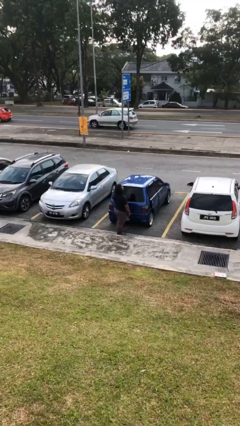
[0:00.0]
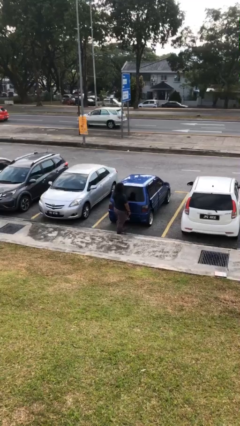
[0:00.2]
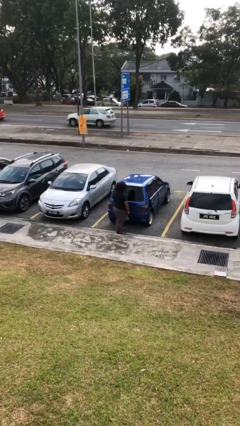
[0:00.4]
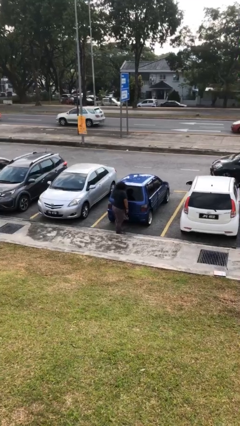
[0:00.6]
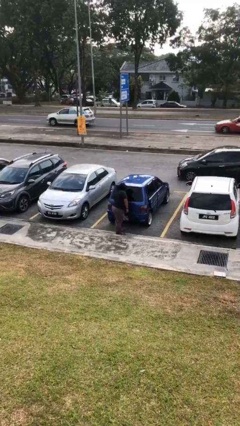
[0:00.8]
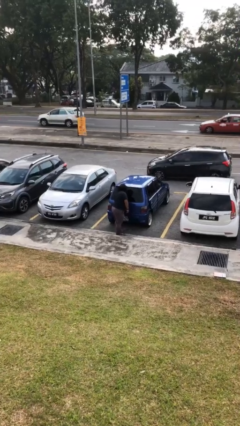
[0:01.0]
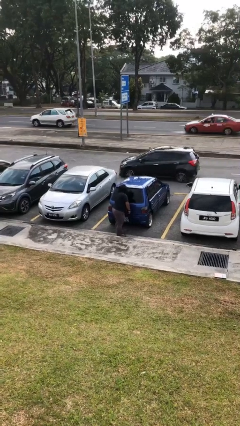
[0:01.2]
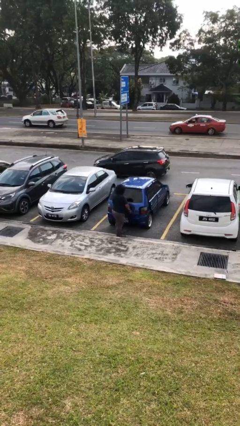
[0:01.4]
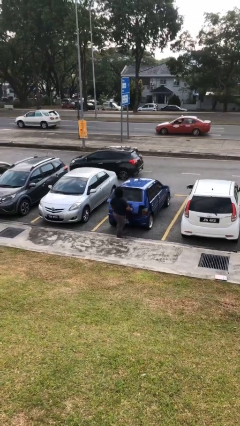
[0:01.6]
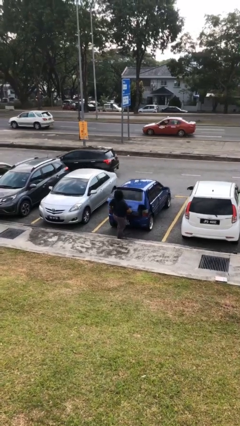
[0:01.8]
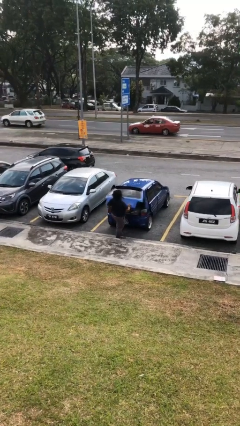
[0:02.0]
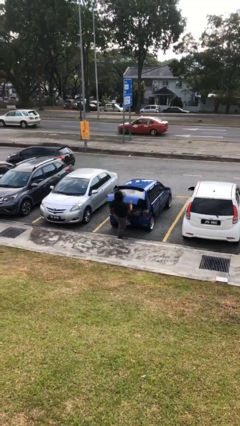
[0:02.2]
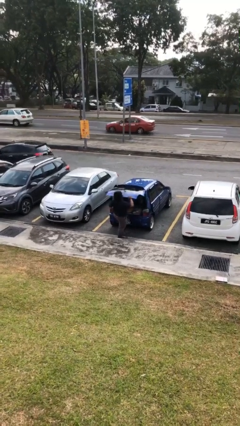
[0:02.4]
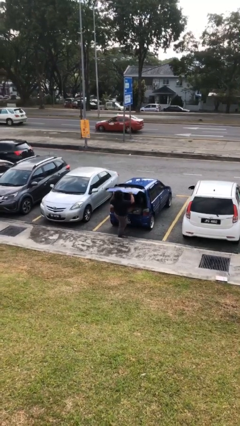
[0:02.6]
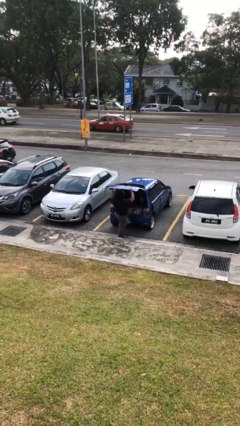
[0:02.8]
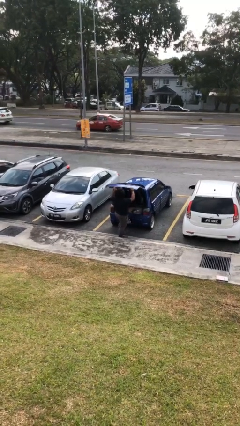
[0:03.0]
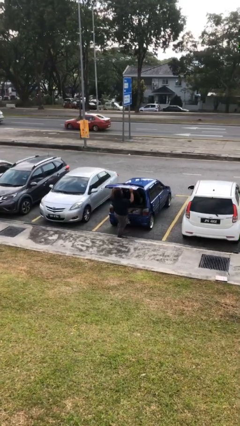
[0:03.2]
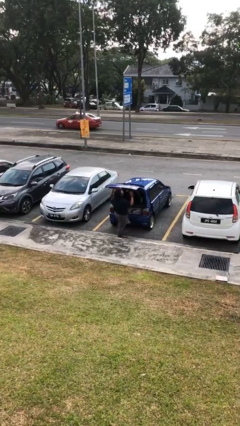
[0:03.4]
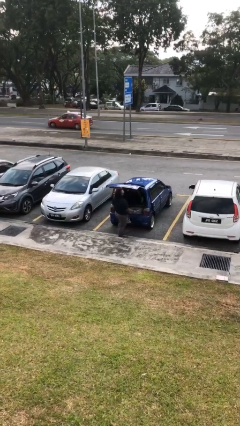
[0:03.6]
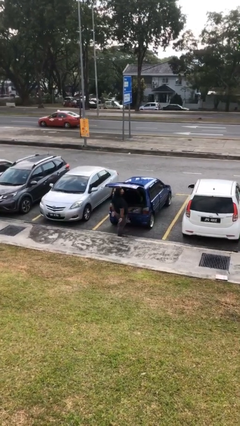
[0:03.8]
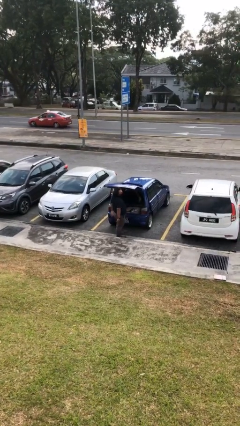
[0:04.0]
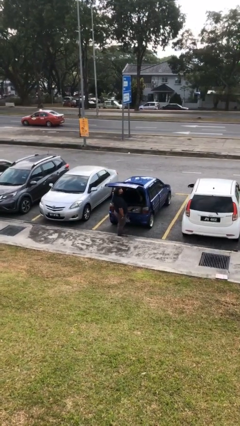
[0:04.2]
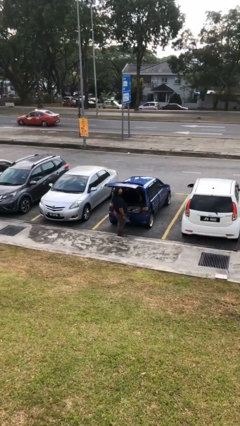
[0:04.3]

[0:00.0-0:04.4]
person opens car trunk

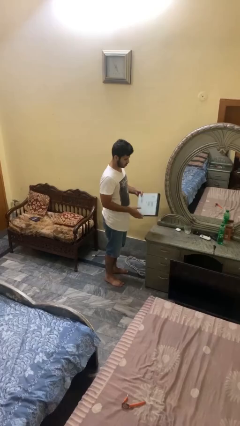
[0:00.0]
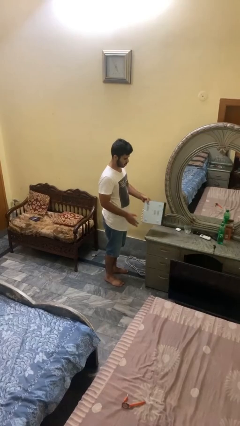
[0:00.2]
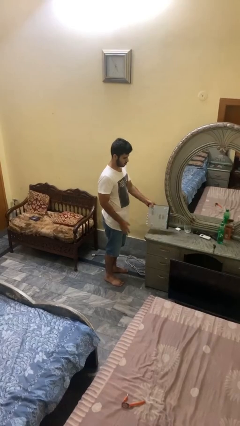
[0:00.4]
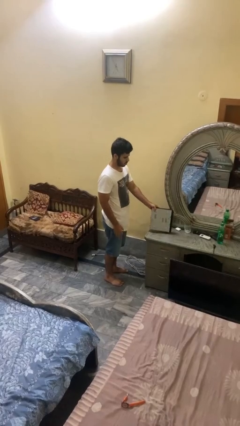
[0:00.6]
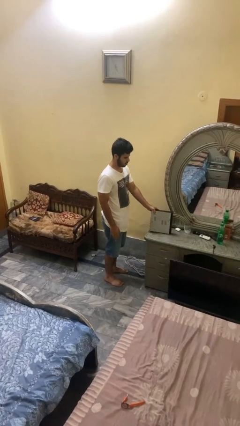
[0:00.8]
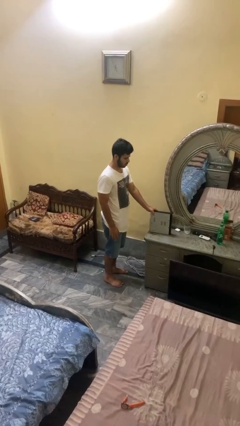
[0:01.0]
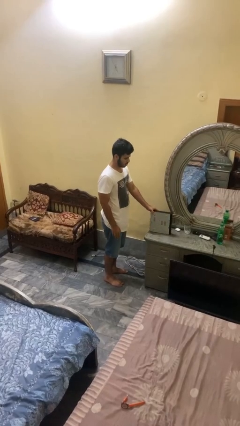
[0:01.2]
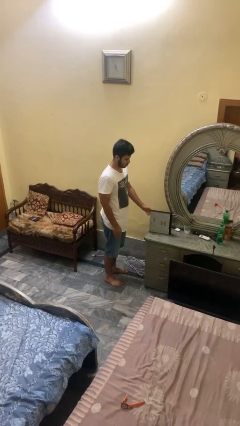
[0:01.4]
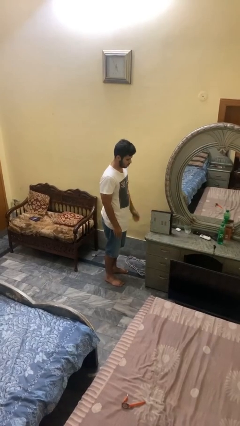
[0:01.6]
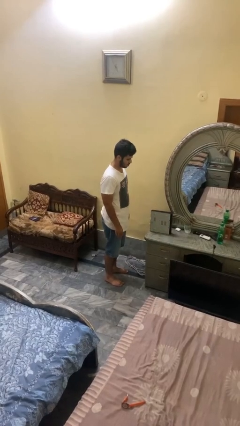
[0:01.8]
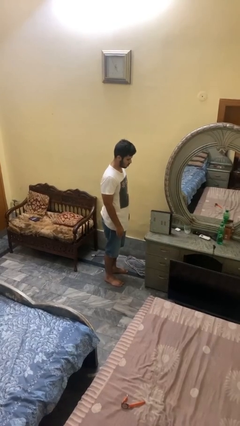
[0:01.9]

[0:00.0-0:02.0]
person puts down object on countertop

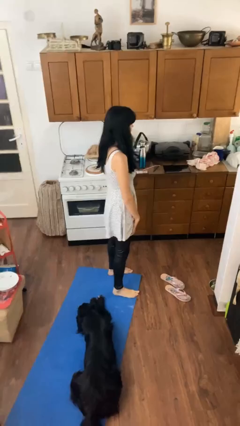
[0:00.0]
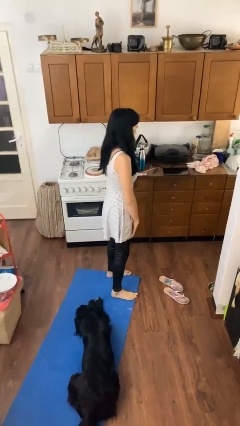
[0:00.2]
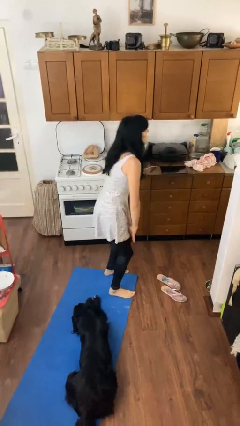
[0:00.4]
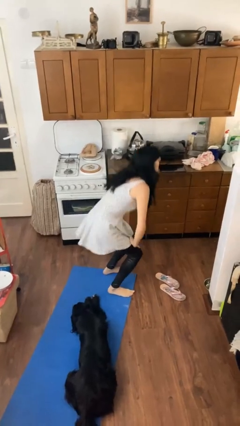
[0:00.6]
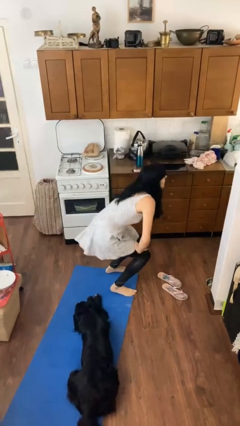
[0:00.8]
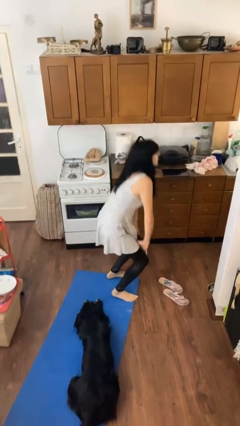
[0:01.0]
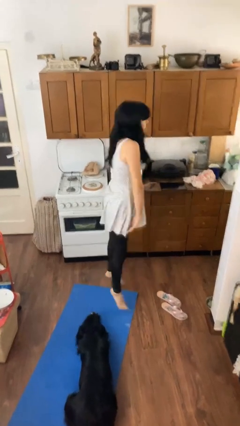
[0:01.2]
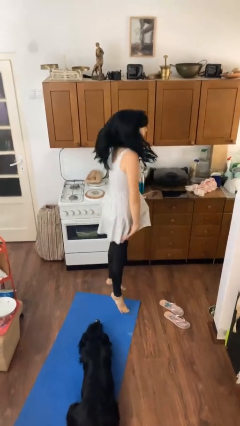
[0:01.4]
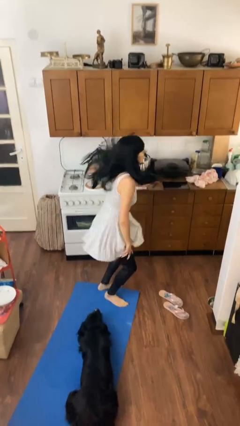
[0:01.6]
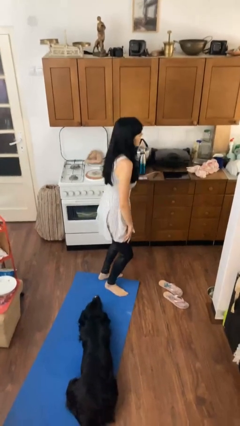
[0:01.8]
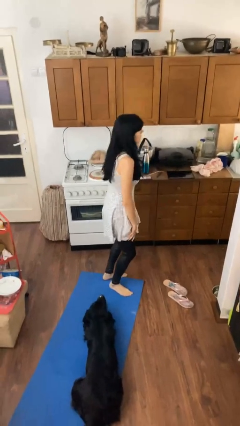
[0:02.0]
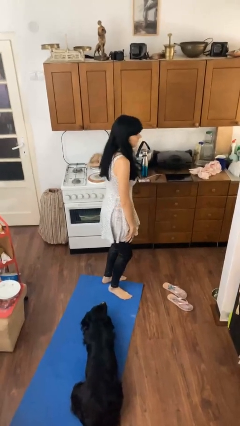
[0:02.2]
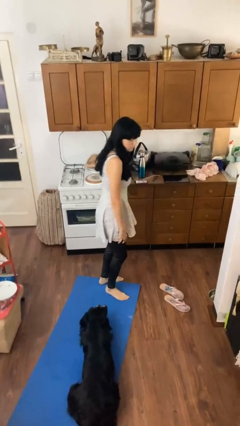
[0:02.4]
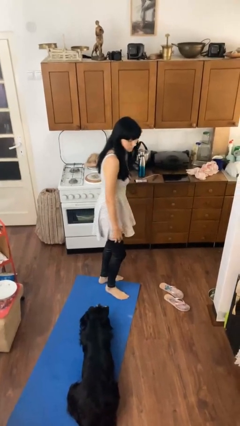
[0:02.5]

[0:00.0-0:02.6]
person jumps

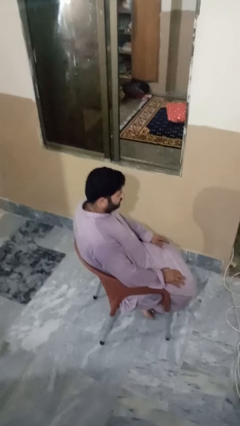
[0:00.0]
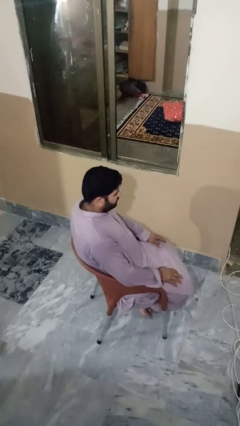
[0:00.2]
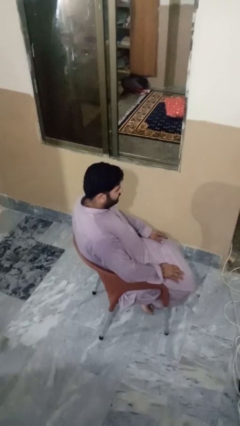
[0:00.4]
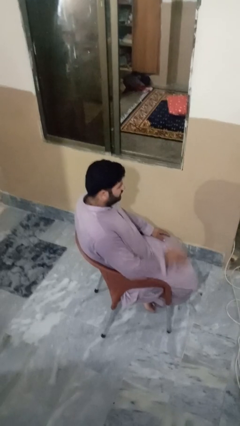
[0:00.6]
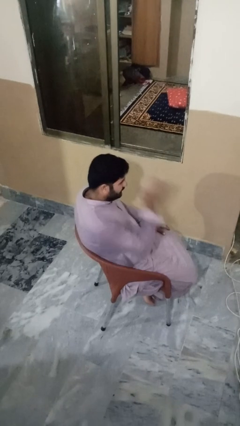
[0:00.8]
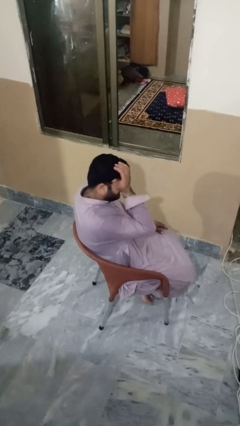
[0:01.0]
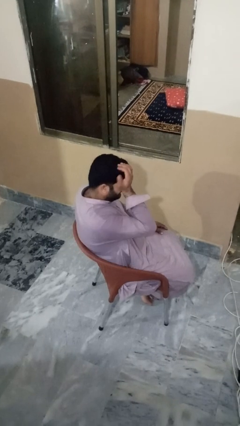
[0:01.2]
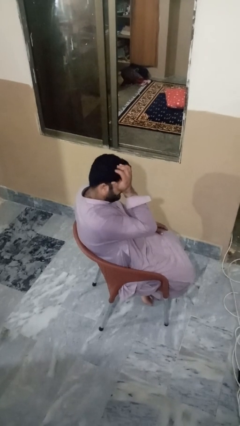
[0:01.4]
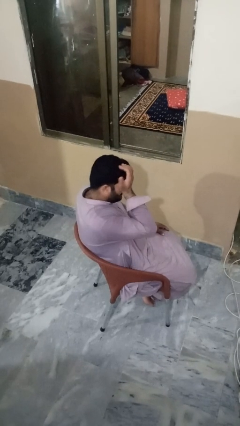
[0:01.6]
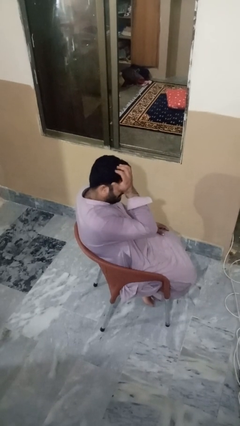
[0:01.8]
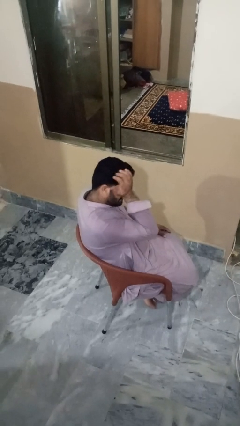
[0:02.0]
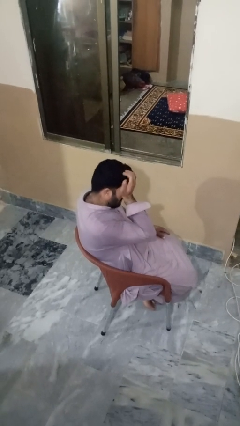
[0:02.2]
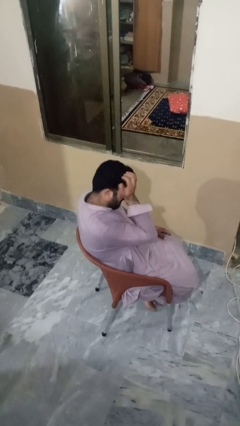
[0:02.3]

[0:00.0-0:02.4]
person rubs eyes

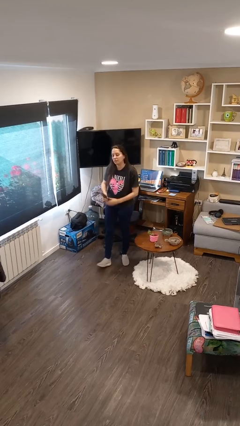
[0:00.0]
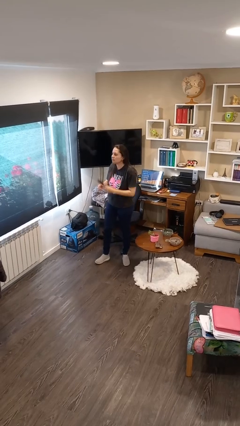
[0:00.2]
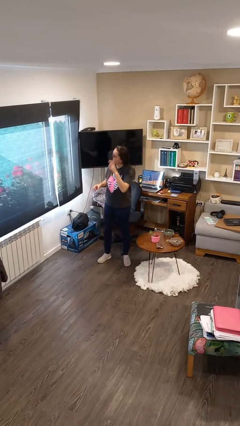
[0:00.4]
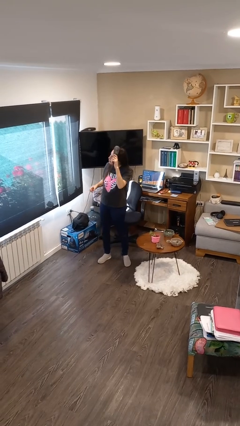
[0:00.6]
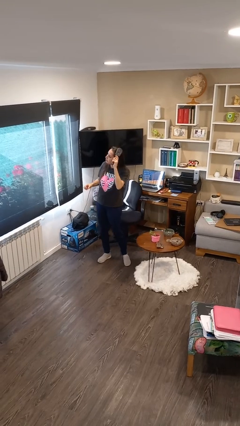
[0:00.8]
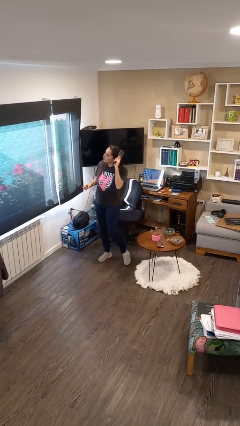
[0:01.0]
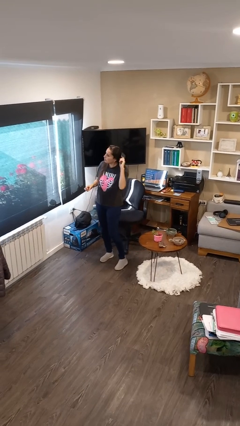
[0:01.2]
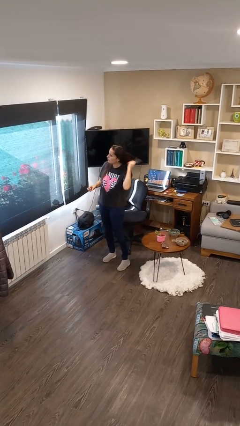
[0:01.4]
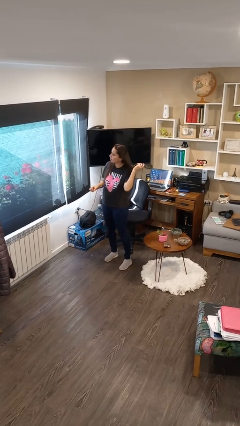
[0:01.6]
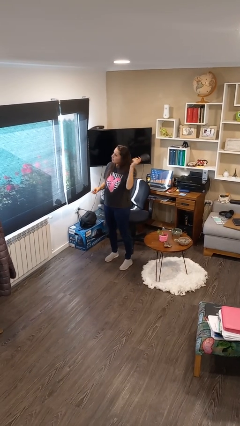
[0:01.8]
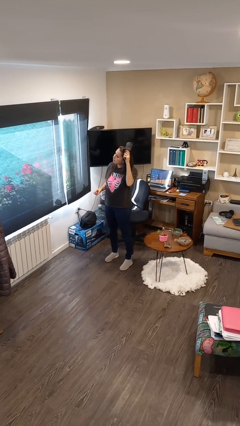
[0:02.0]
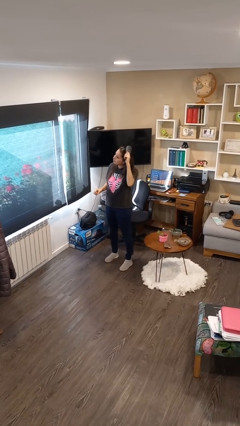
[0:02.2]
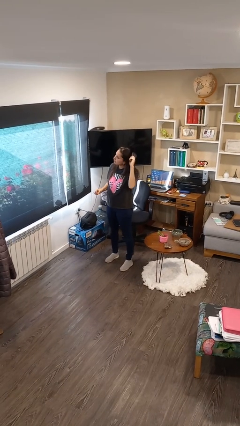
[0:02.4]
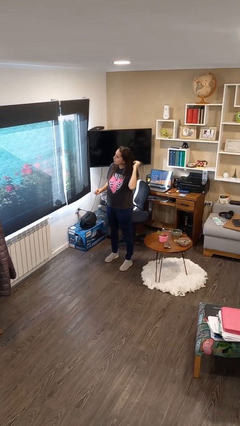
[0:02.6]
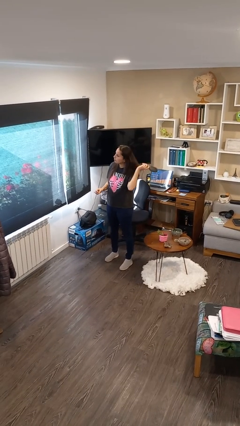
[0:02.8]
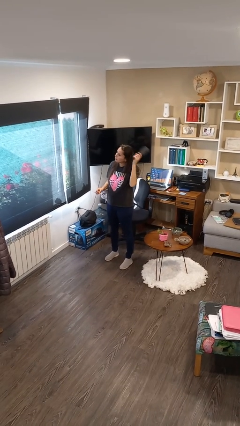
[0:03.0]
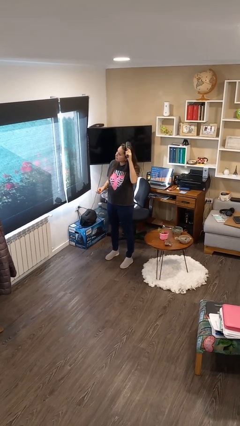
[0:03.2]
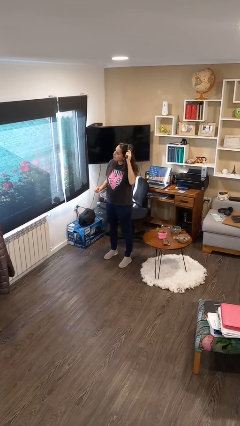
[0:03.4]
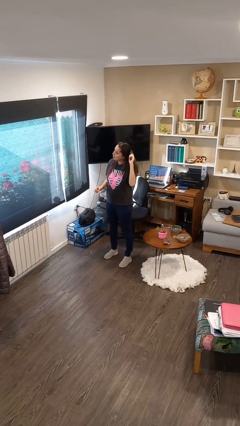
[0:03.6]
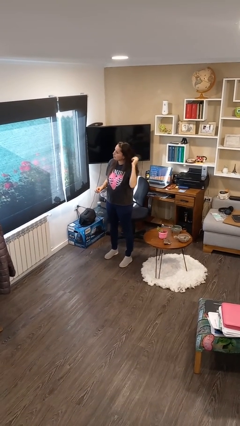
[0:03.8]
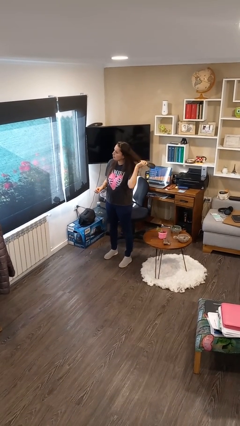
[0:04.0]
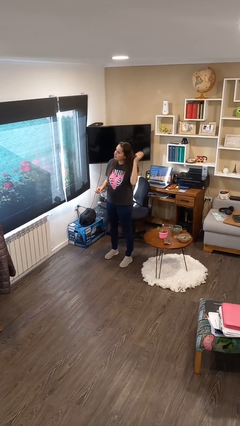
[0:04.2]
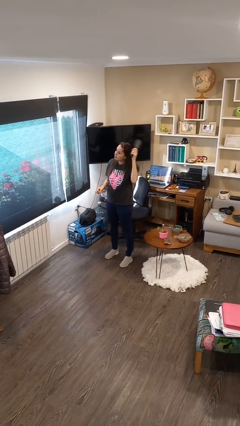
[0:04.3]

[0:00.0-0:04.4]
person brushes hair

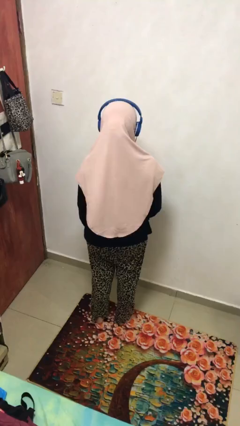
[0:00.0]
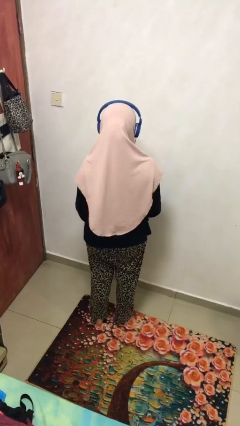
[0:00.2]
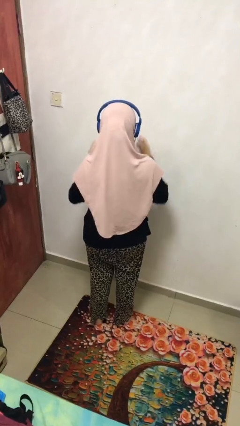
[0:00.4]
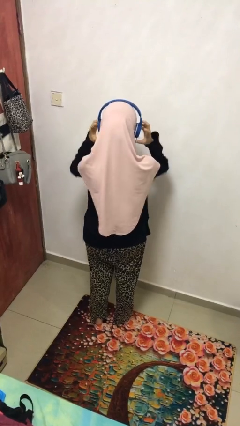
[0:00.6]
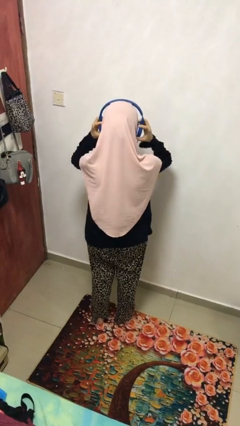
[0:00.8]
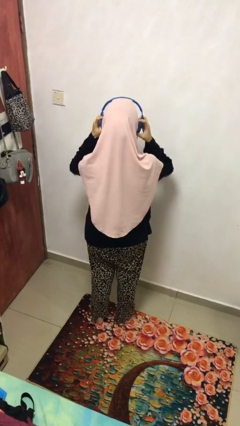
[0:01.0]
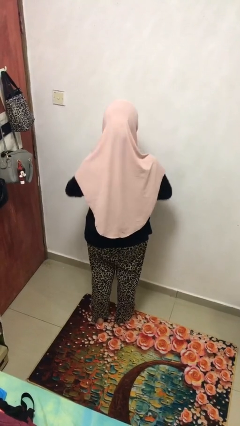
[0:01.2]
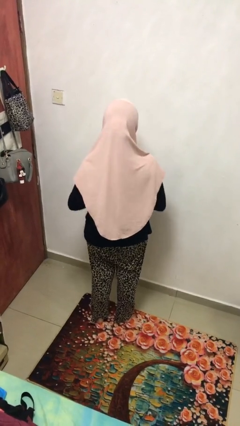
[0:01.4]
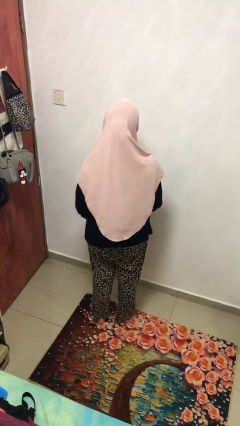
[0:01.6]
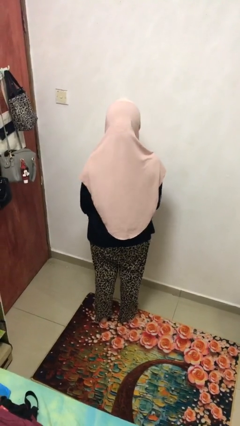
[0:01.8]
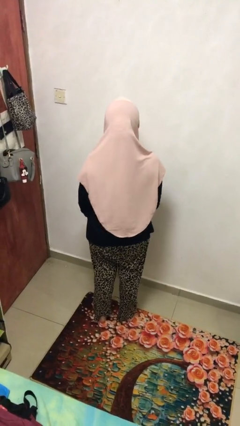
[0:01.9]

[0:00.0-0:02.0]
person takes off headphones
